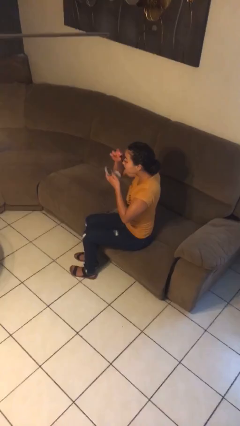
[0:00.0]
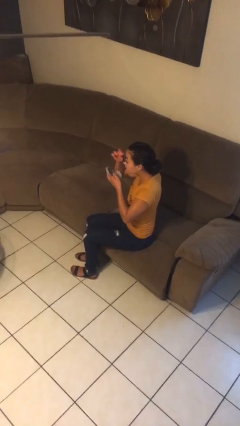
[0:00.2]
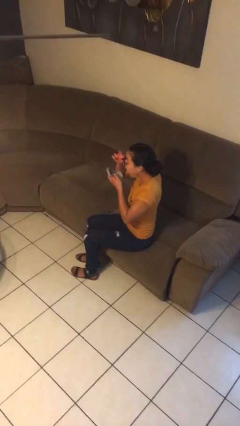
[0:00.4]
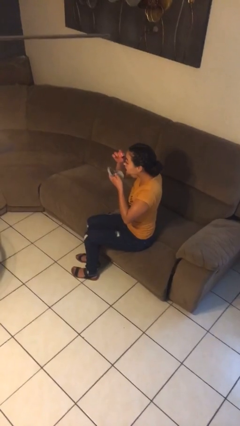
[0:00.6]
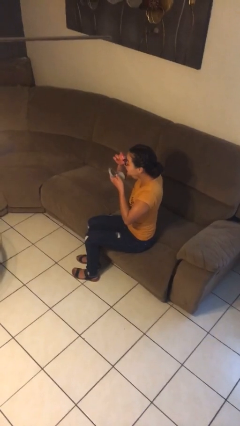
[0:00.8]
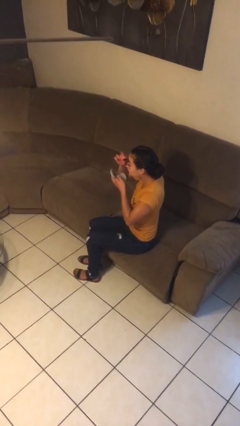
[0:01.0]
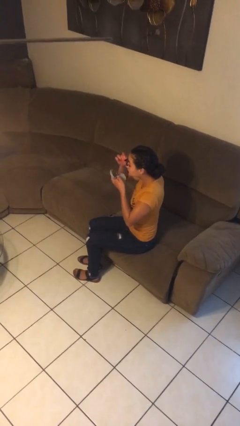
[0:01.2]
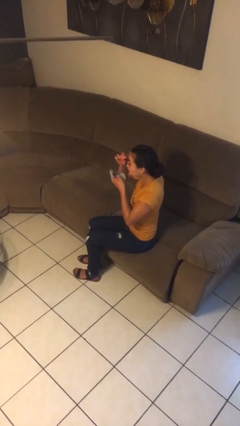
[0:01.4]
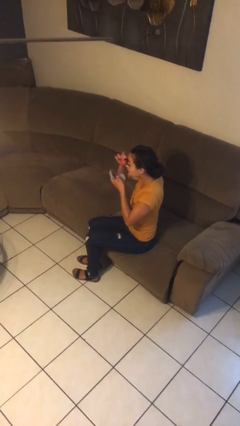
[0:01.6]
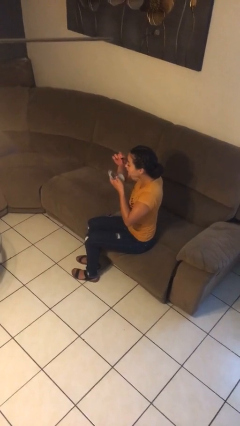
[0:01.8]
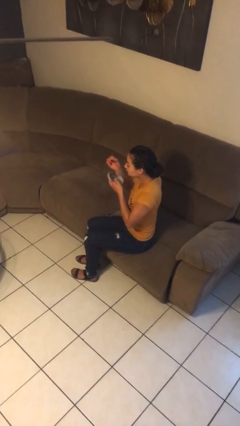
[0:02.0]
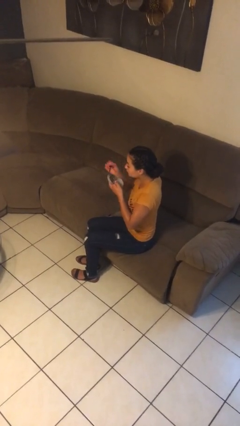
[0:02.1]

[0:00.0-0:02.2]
person applies eye makeup

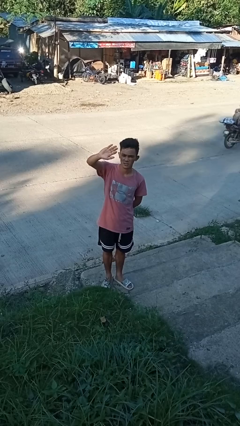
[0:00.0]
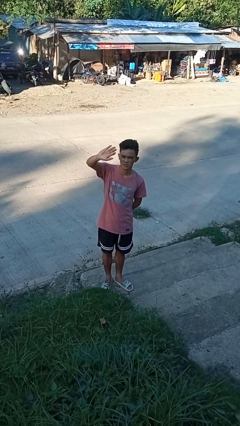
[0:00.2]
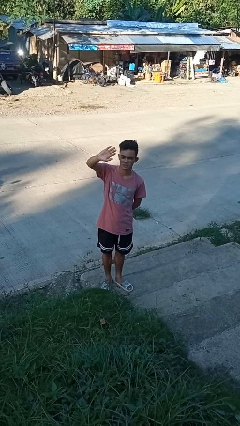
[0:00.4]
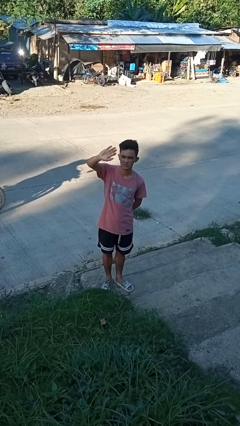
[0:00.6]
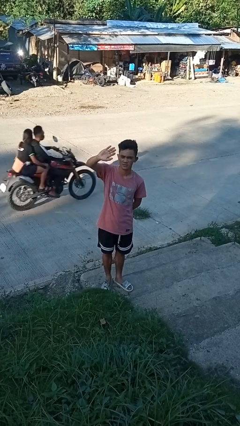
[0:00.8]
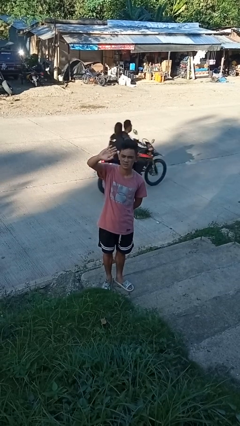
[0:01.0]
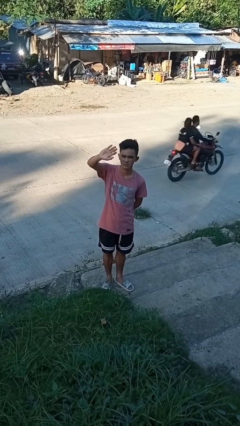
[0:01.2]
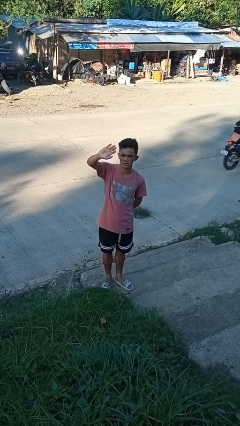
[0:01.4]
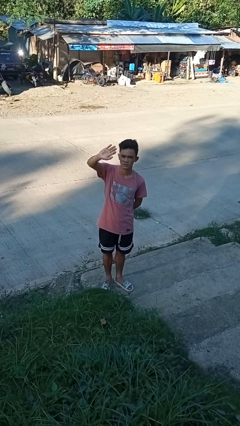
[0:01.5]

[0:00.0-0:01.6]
person shades eyes

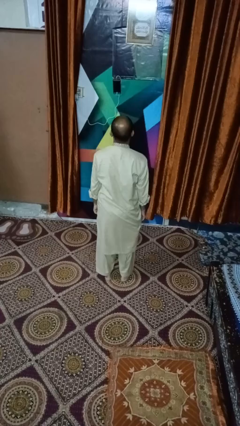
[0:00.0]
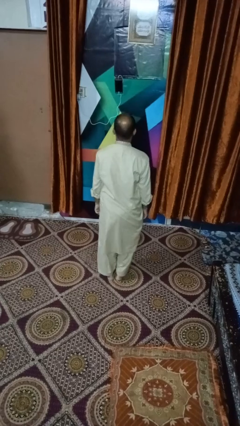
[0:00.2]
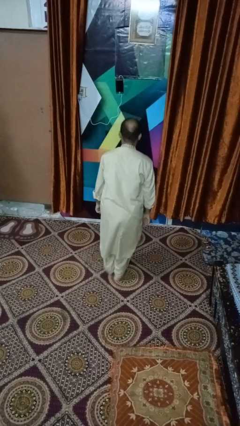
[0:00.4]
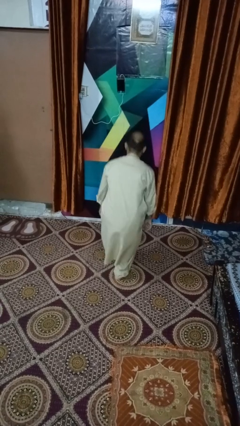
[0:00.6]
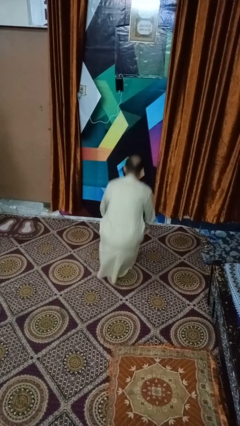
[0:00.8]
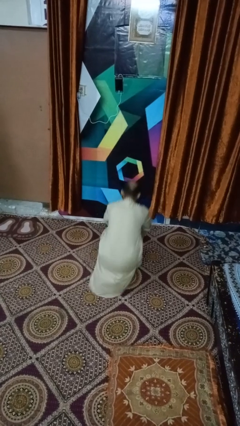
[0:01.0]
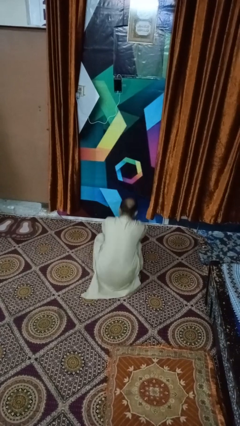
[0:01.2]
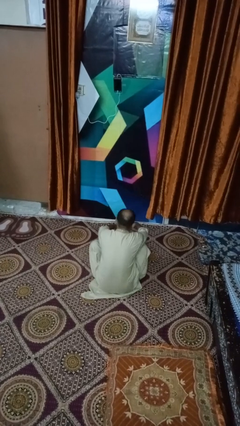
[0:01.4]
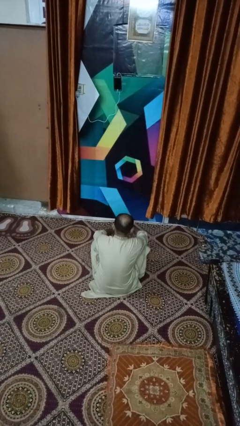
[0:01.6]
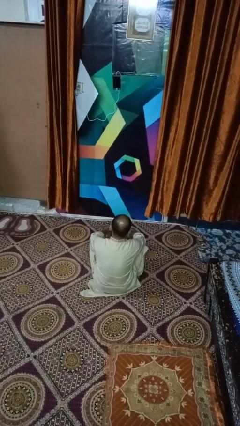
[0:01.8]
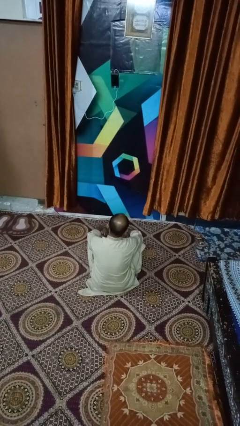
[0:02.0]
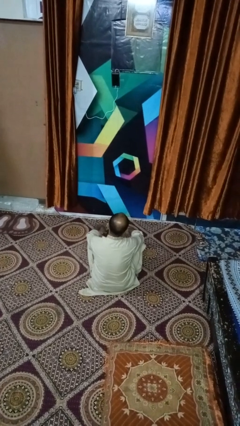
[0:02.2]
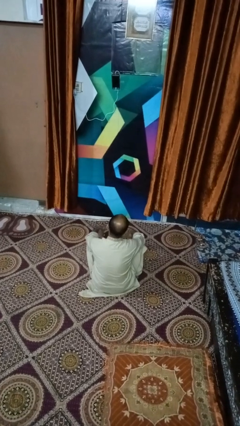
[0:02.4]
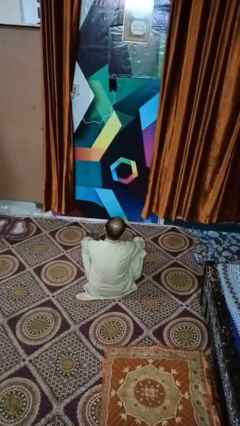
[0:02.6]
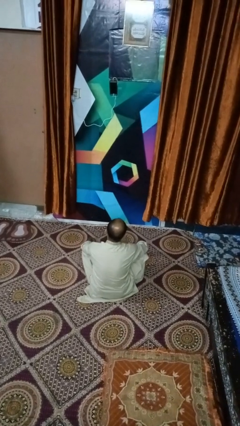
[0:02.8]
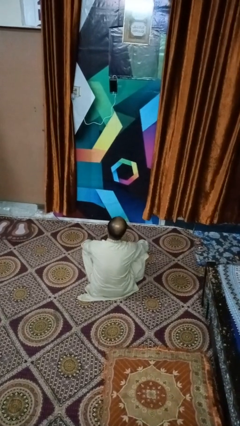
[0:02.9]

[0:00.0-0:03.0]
person sits crisscross

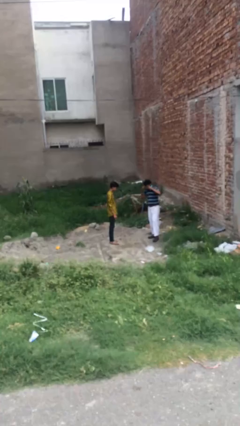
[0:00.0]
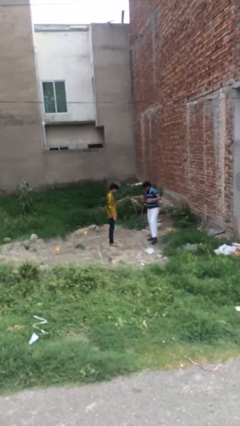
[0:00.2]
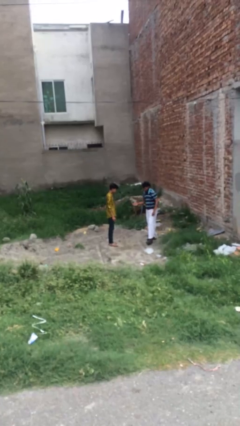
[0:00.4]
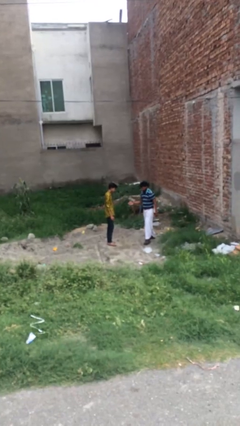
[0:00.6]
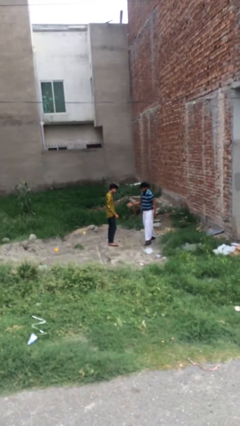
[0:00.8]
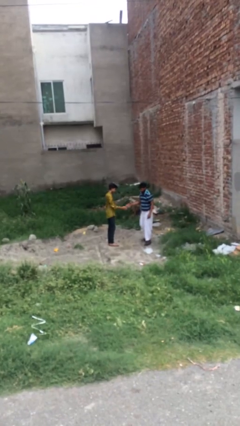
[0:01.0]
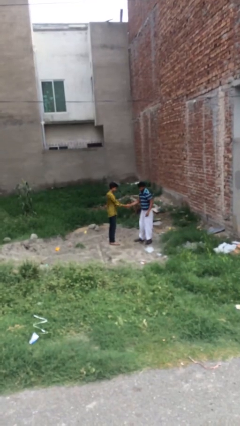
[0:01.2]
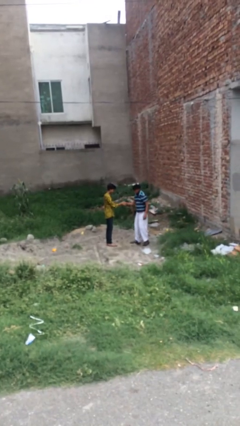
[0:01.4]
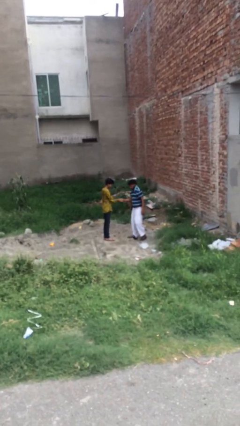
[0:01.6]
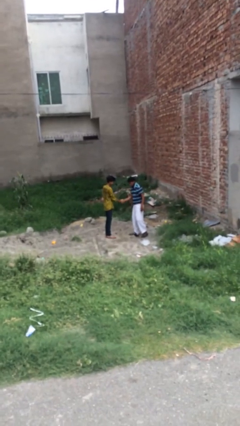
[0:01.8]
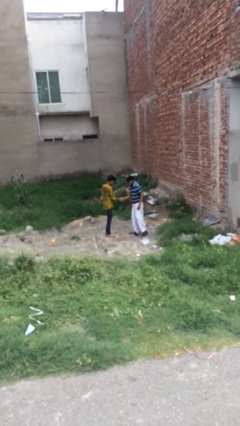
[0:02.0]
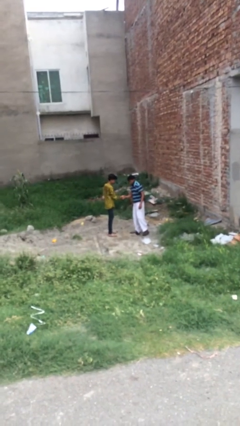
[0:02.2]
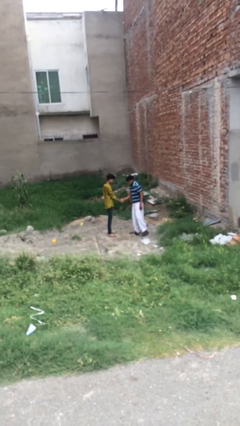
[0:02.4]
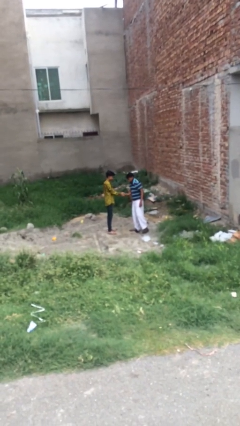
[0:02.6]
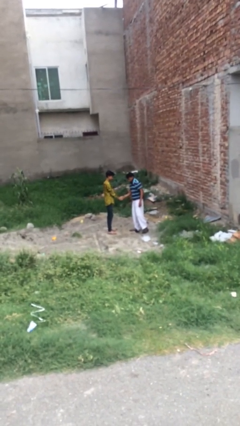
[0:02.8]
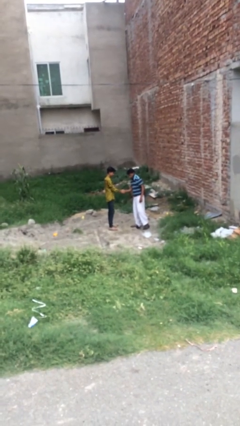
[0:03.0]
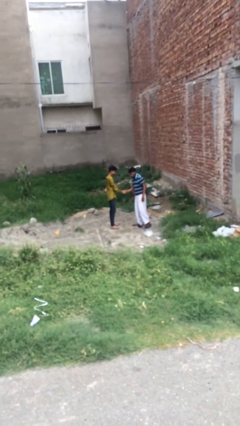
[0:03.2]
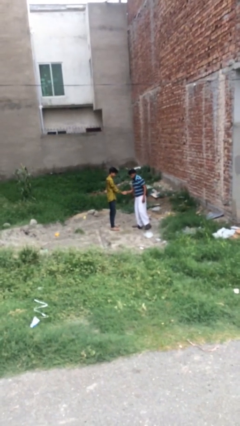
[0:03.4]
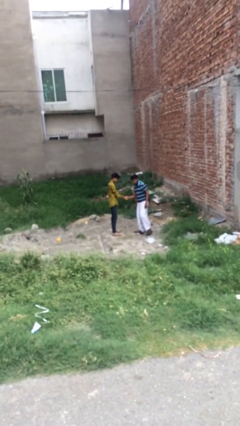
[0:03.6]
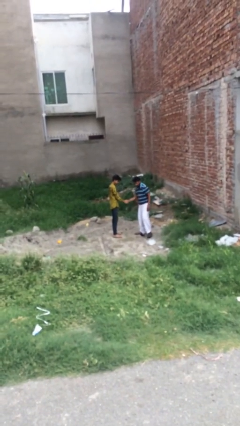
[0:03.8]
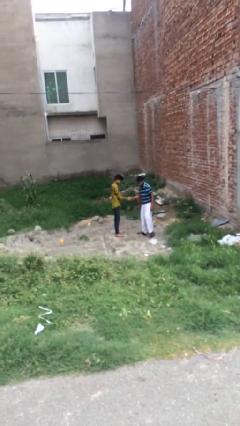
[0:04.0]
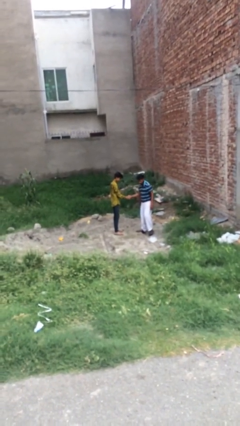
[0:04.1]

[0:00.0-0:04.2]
person shakes hand

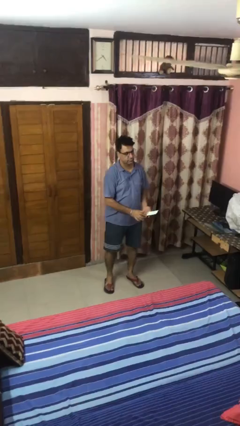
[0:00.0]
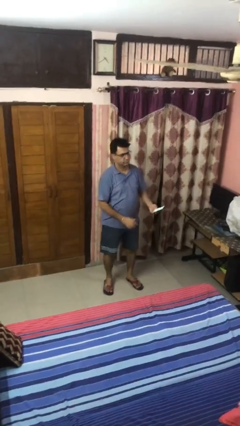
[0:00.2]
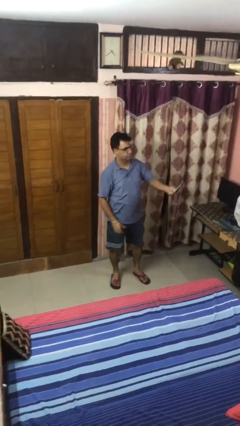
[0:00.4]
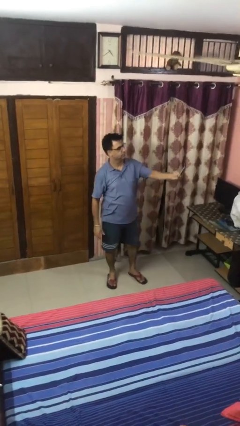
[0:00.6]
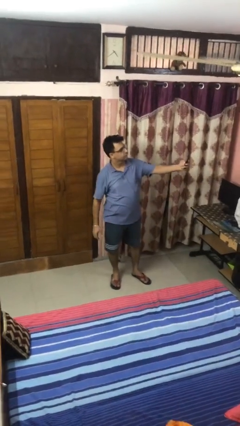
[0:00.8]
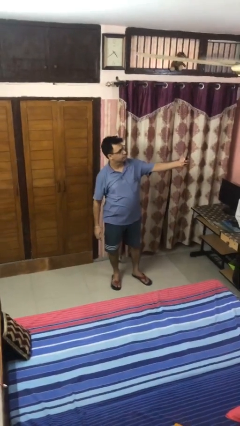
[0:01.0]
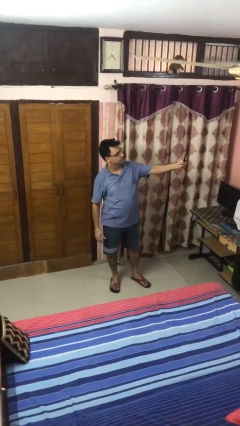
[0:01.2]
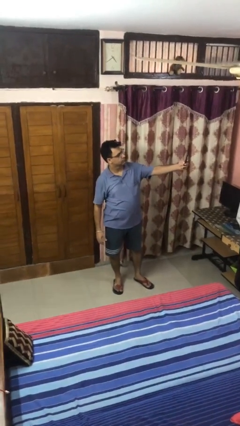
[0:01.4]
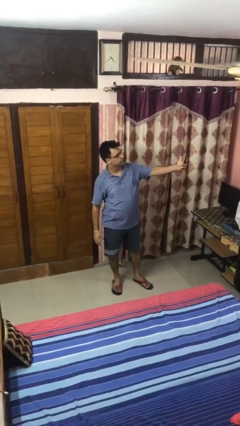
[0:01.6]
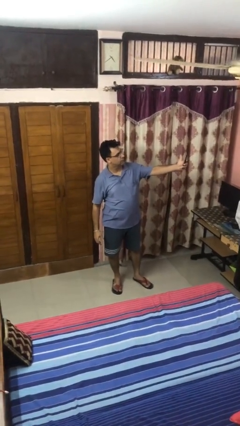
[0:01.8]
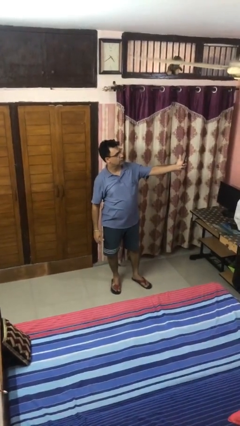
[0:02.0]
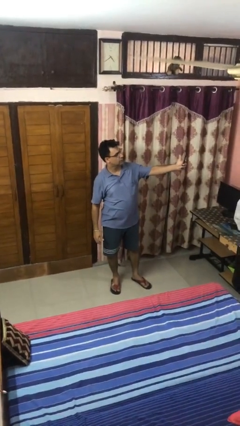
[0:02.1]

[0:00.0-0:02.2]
person takes selfie

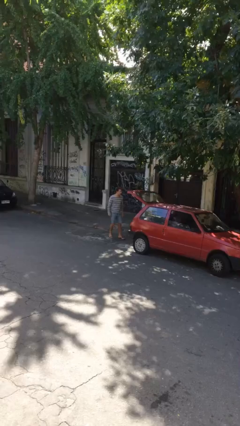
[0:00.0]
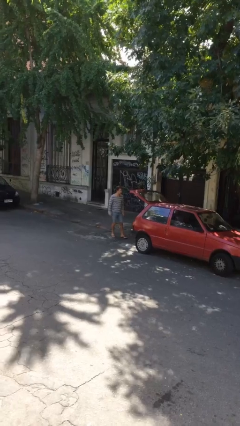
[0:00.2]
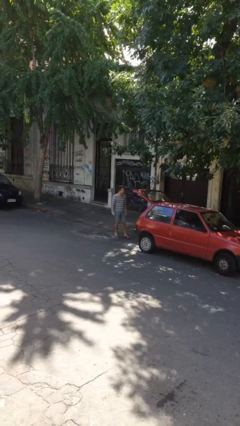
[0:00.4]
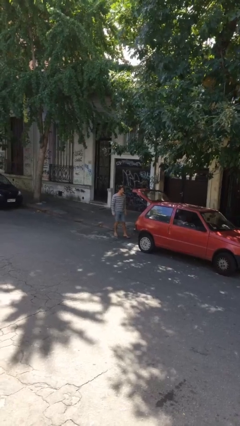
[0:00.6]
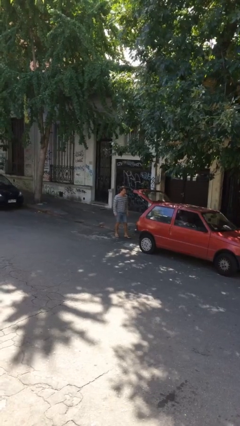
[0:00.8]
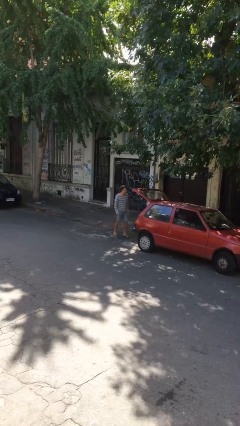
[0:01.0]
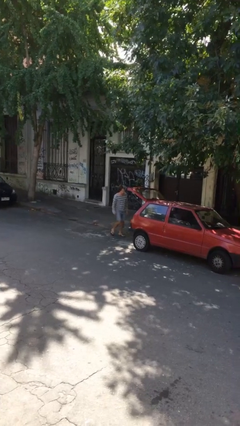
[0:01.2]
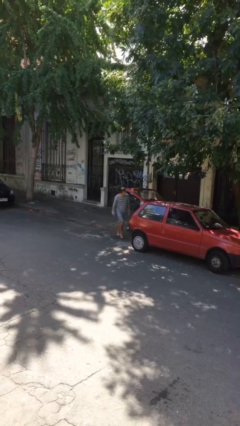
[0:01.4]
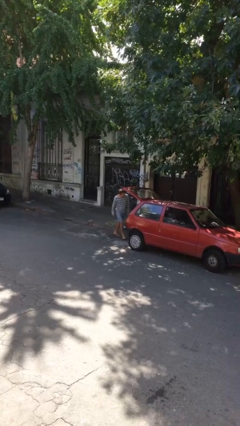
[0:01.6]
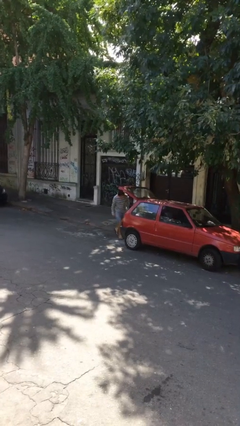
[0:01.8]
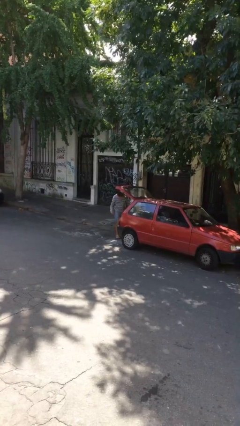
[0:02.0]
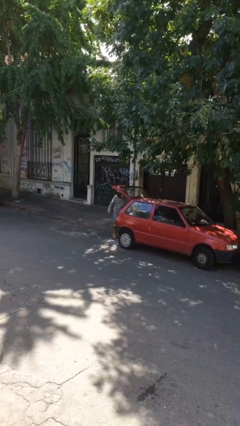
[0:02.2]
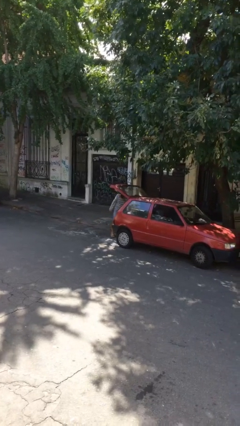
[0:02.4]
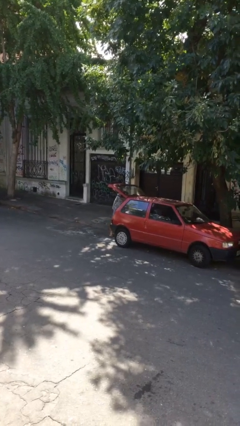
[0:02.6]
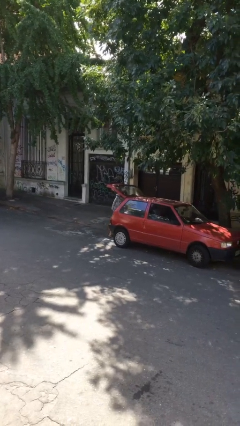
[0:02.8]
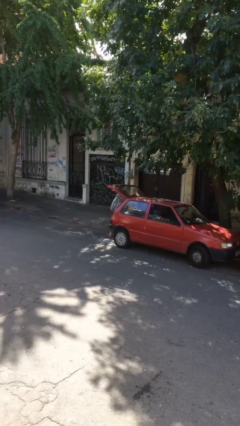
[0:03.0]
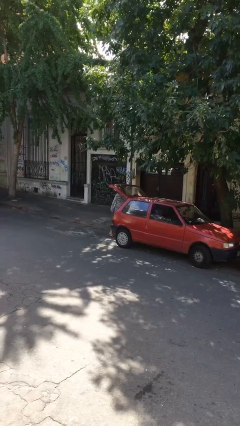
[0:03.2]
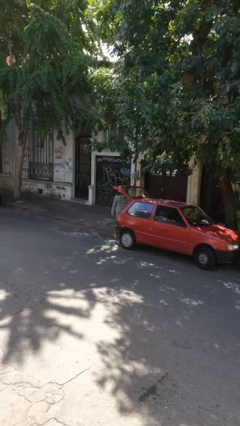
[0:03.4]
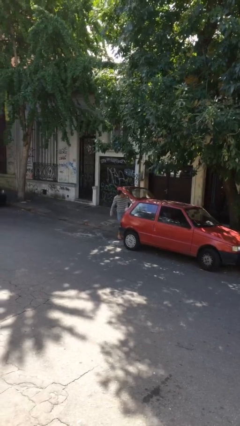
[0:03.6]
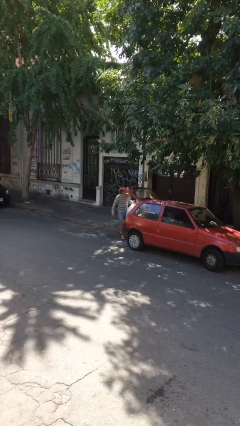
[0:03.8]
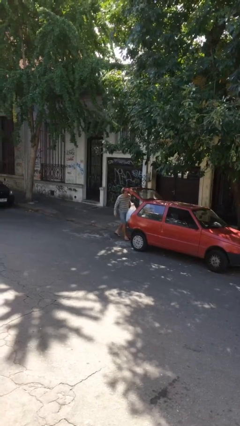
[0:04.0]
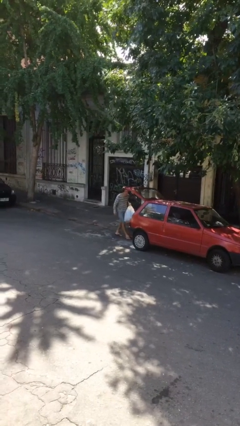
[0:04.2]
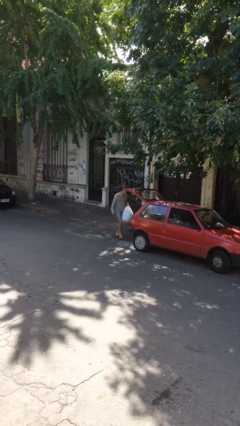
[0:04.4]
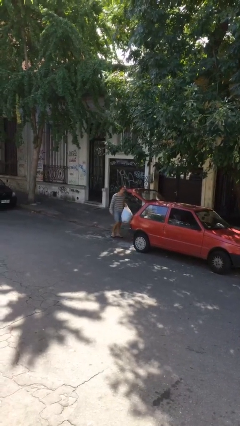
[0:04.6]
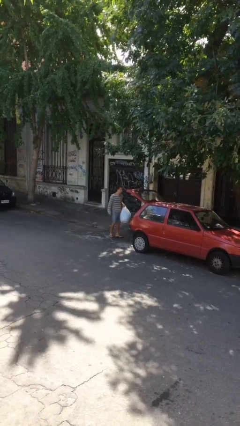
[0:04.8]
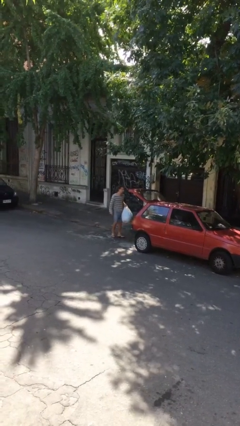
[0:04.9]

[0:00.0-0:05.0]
person unloads car
